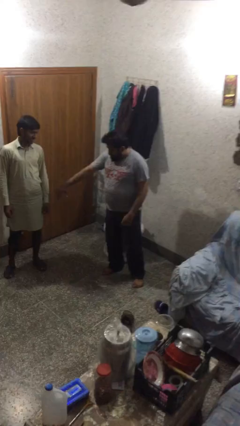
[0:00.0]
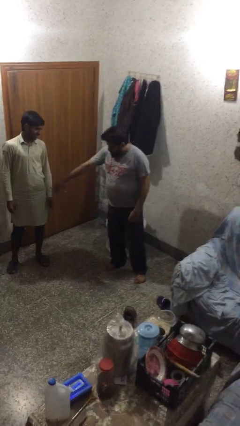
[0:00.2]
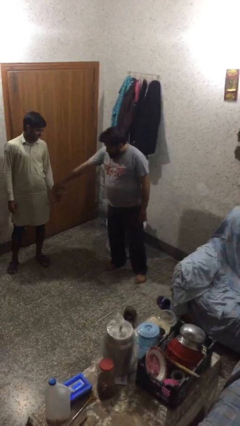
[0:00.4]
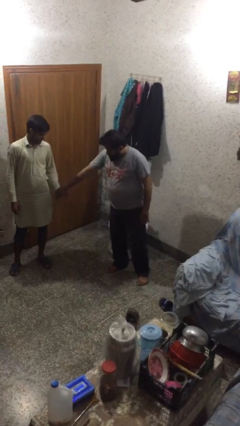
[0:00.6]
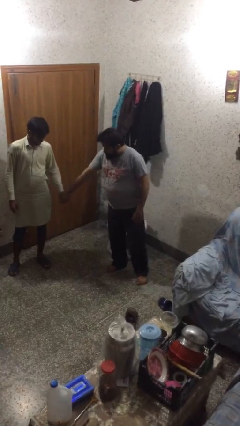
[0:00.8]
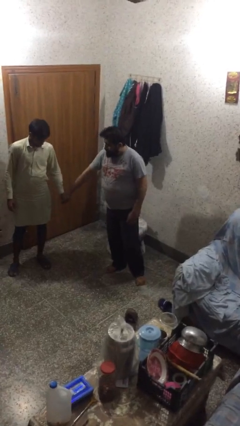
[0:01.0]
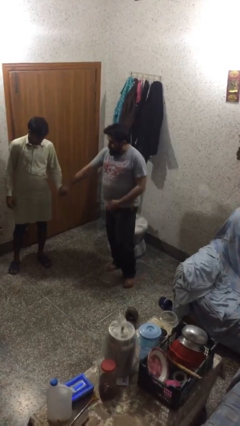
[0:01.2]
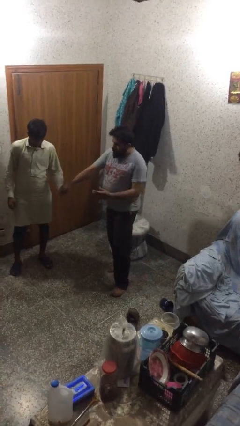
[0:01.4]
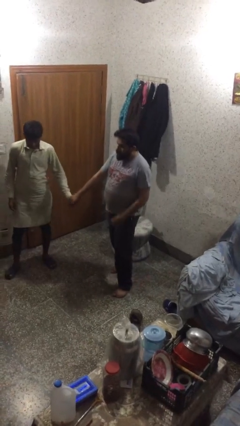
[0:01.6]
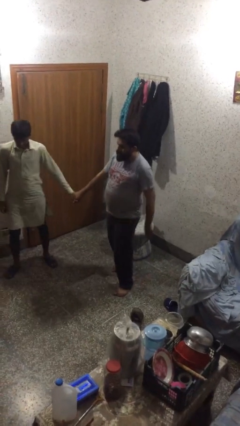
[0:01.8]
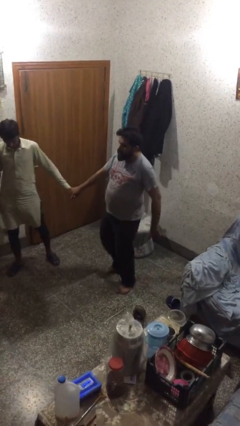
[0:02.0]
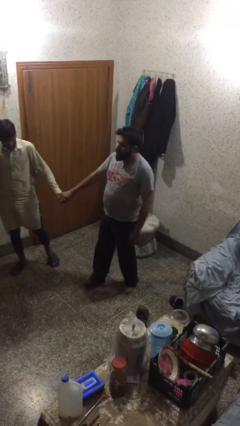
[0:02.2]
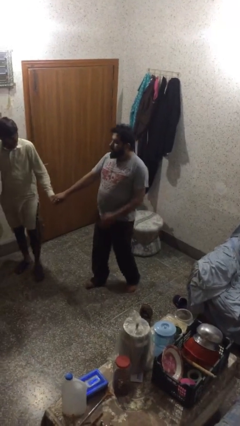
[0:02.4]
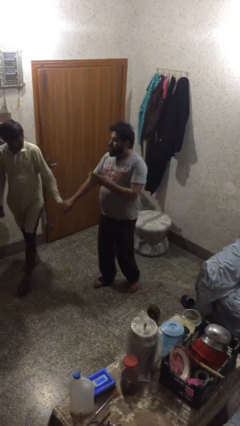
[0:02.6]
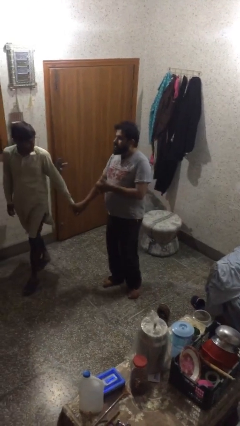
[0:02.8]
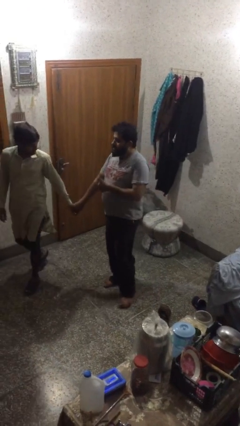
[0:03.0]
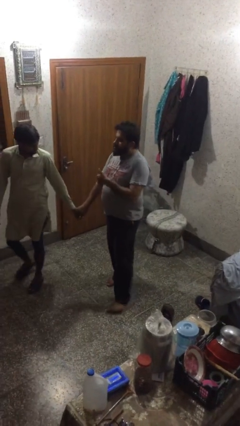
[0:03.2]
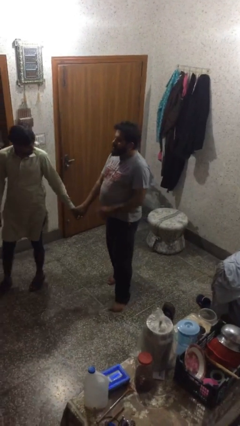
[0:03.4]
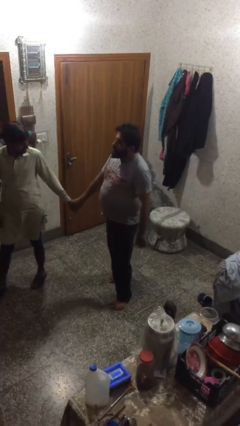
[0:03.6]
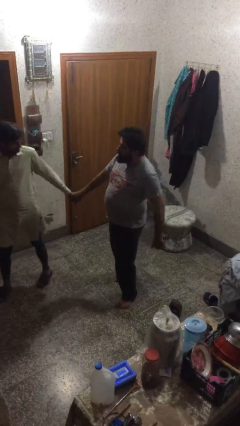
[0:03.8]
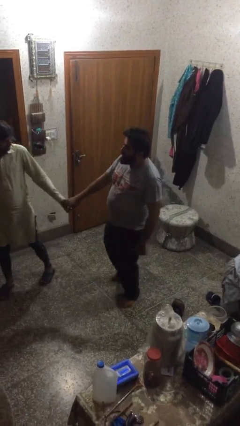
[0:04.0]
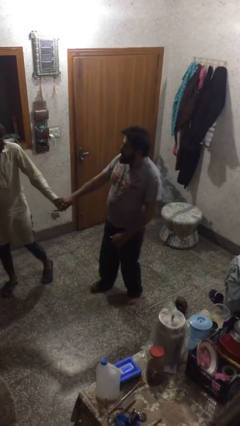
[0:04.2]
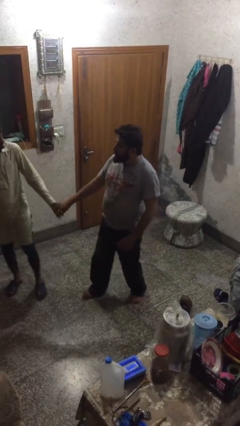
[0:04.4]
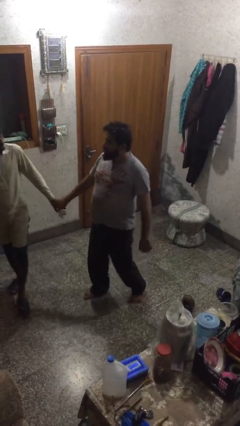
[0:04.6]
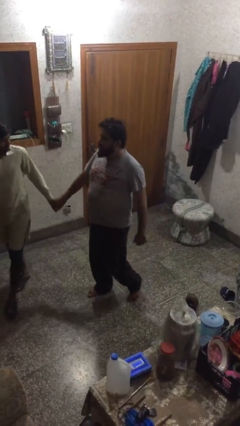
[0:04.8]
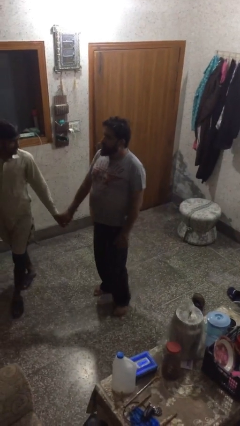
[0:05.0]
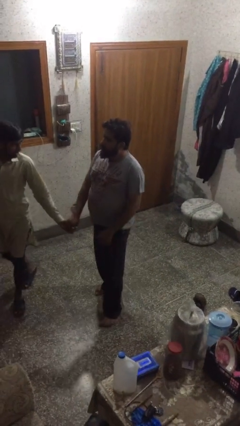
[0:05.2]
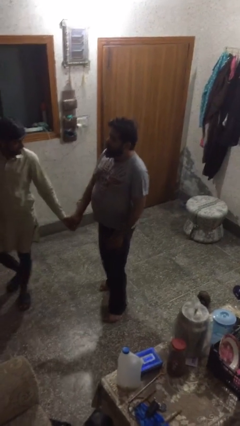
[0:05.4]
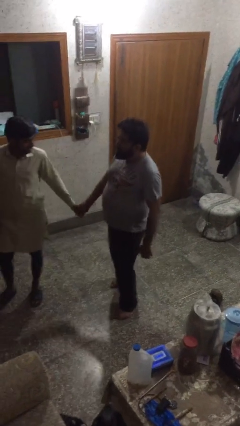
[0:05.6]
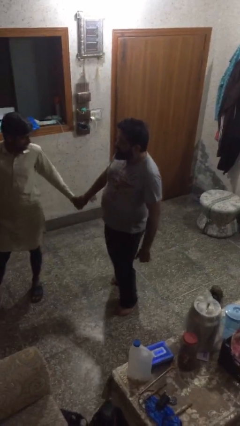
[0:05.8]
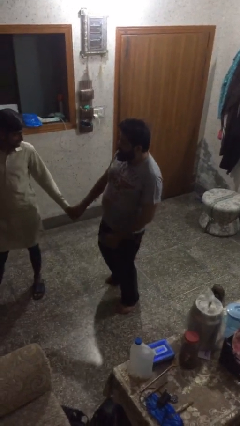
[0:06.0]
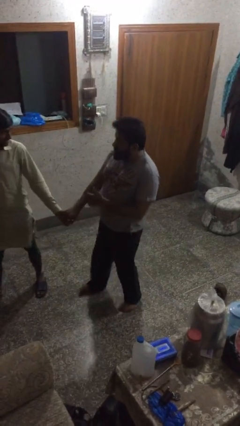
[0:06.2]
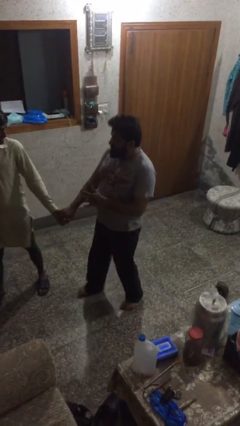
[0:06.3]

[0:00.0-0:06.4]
person holds hand

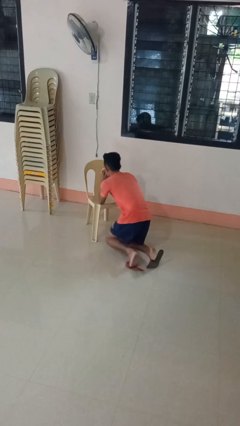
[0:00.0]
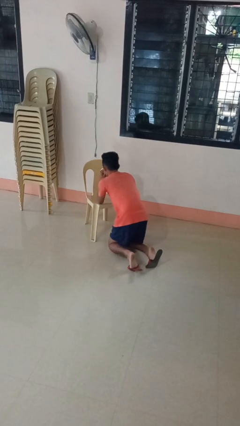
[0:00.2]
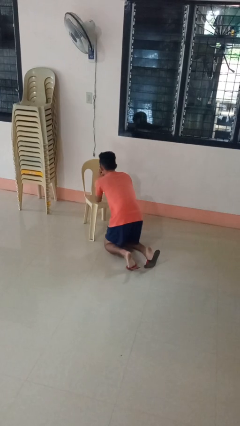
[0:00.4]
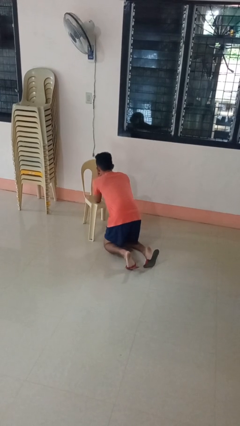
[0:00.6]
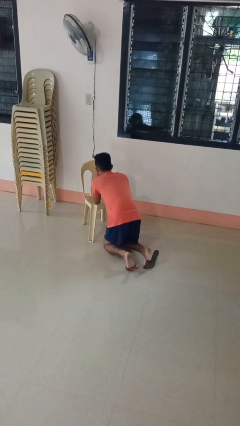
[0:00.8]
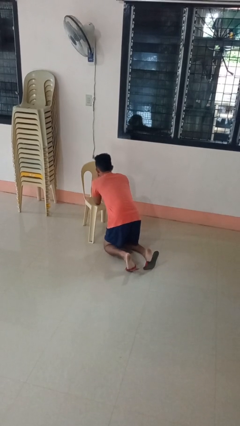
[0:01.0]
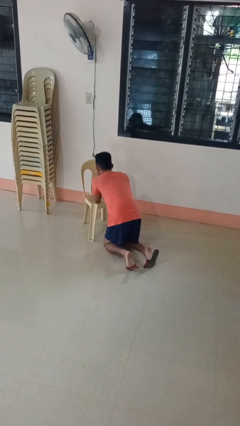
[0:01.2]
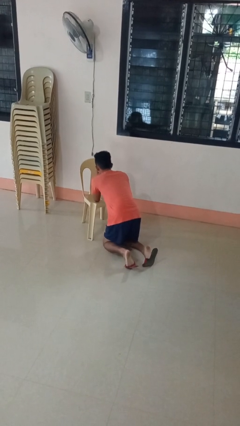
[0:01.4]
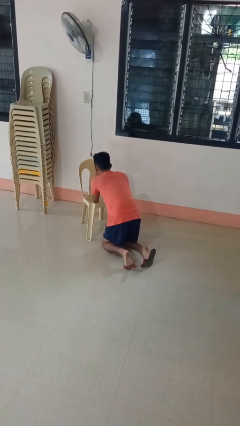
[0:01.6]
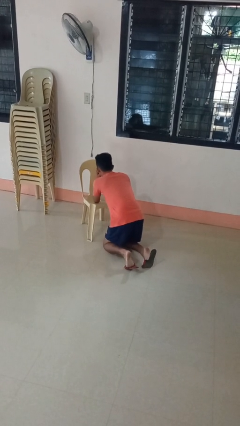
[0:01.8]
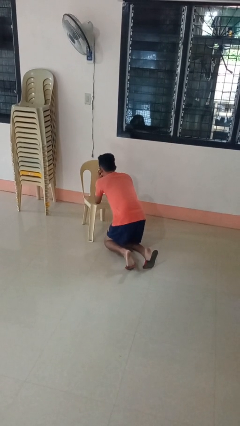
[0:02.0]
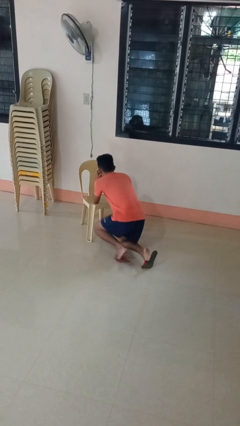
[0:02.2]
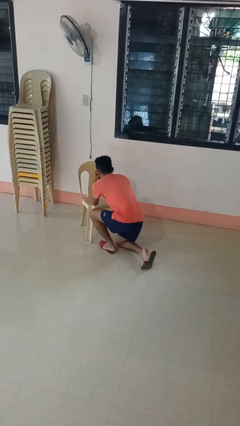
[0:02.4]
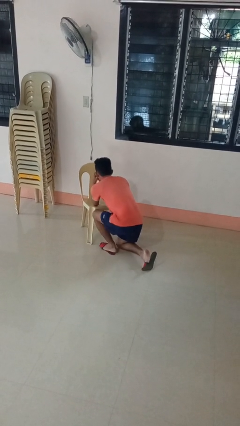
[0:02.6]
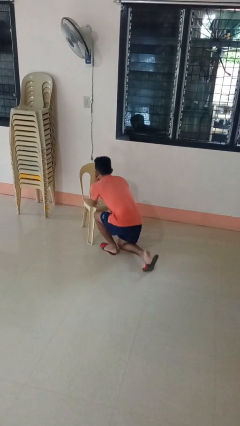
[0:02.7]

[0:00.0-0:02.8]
person prays

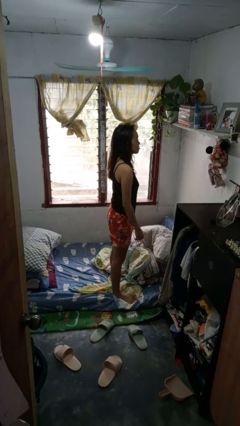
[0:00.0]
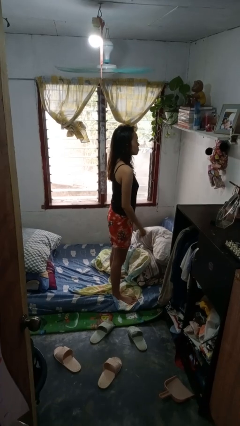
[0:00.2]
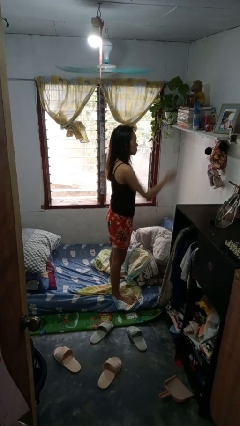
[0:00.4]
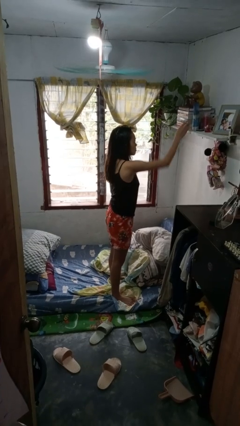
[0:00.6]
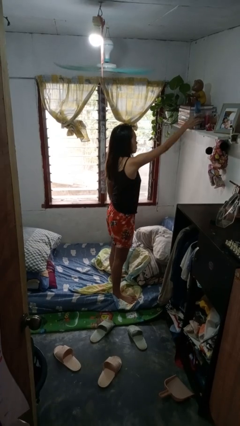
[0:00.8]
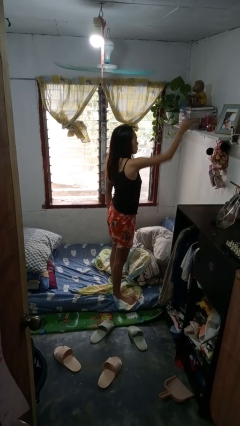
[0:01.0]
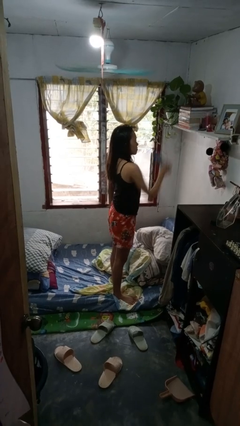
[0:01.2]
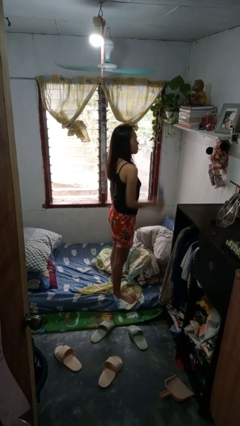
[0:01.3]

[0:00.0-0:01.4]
person picks up object from shelf

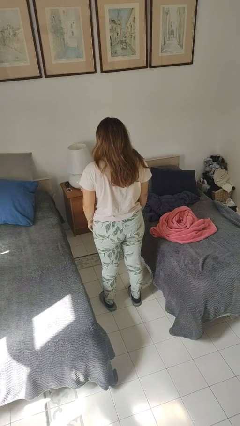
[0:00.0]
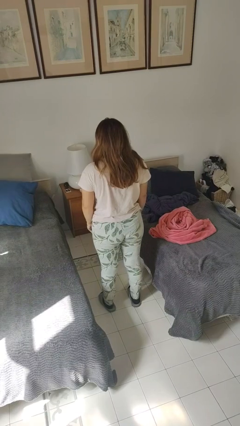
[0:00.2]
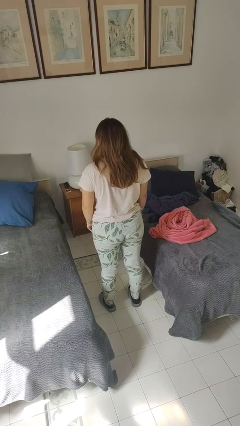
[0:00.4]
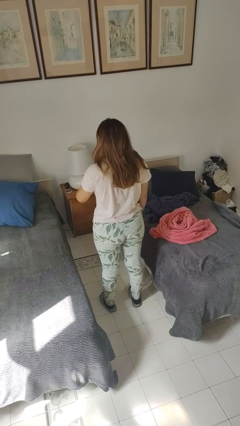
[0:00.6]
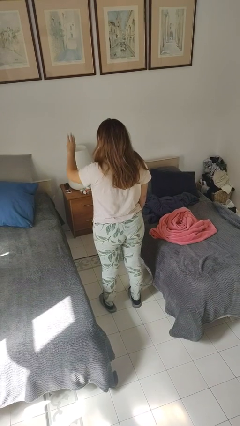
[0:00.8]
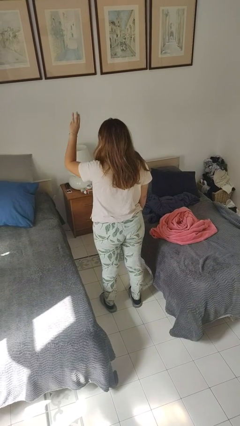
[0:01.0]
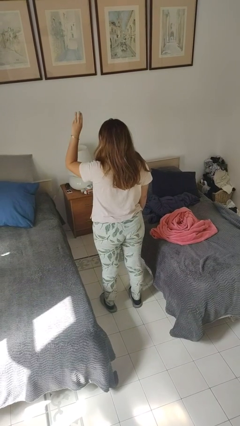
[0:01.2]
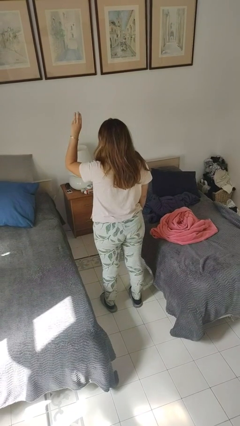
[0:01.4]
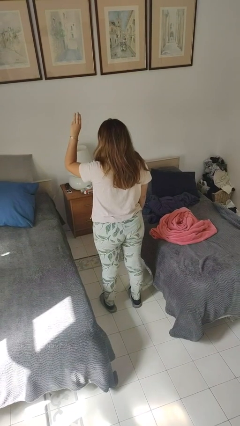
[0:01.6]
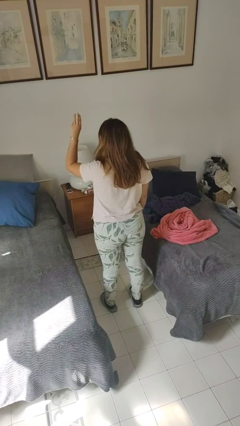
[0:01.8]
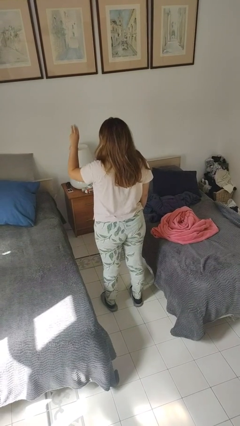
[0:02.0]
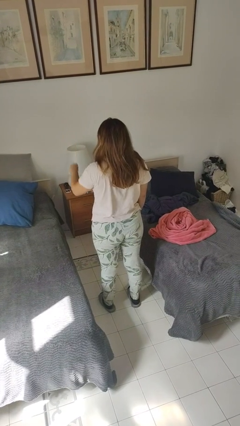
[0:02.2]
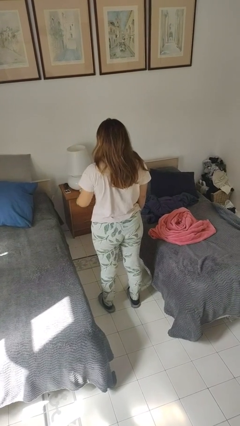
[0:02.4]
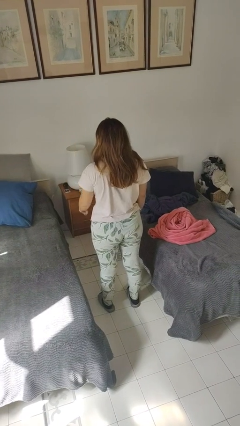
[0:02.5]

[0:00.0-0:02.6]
person gestures number three

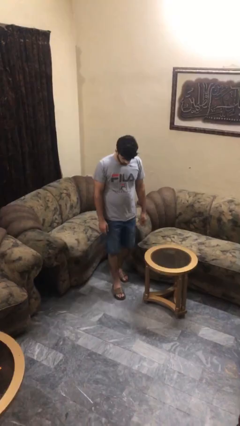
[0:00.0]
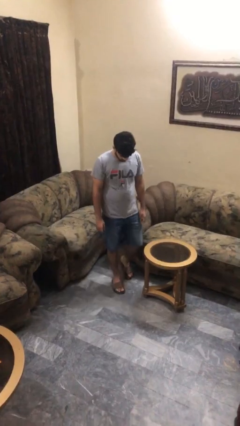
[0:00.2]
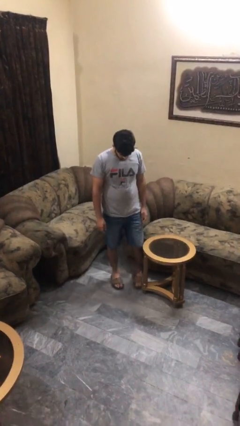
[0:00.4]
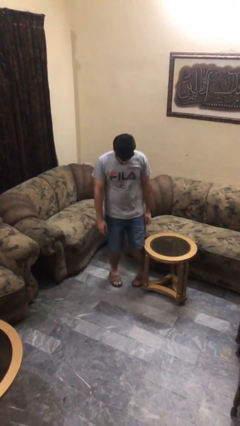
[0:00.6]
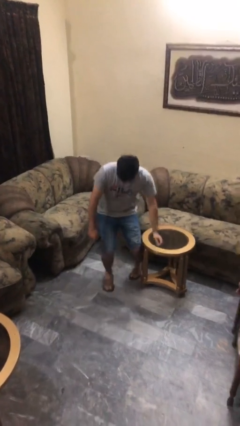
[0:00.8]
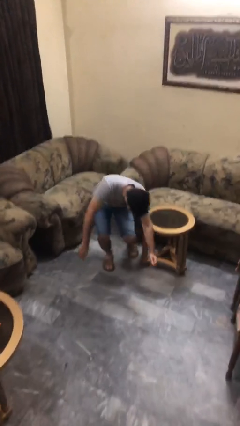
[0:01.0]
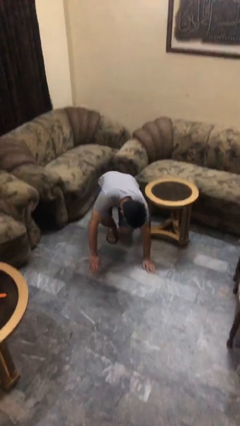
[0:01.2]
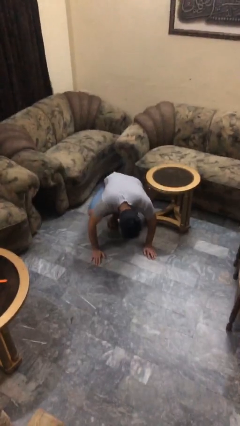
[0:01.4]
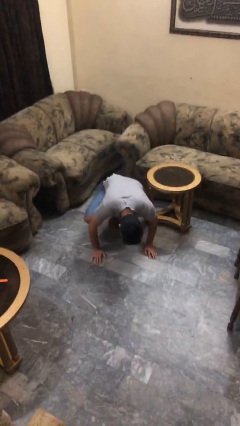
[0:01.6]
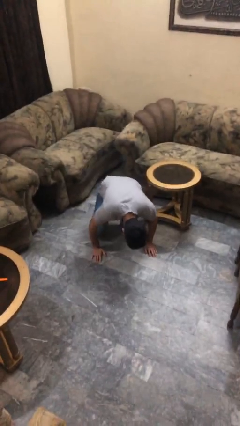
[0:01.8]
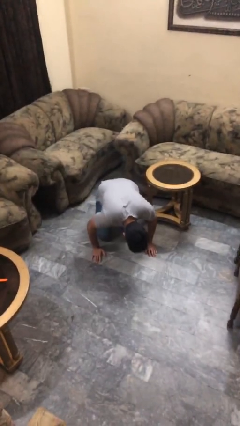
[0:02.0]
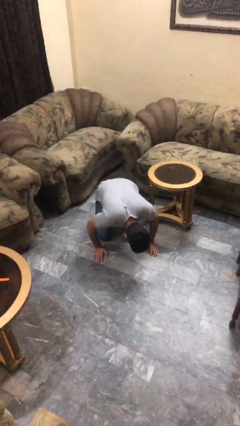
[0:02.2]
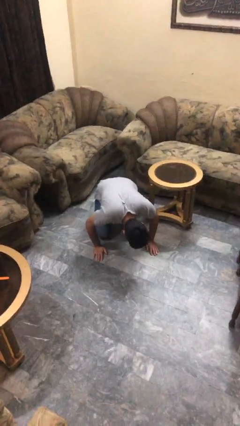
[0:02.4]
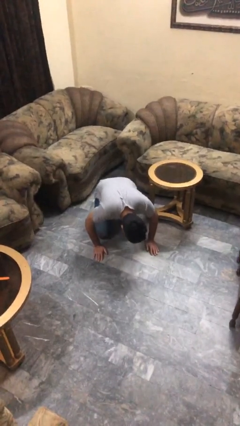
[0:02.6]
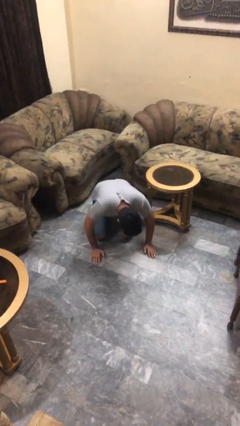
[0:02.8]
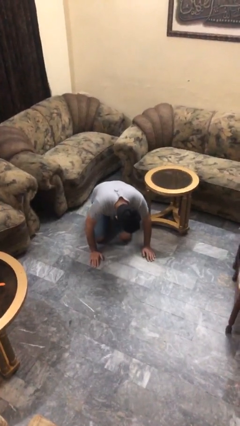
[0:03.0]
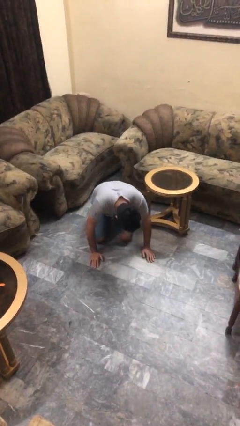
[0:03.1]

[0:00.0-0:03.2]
person trips on object on floor

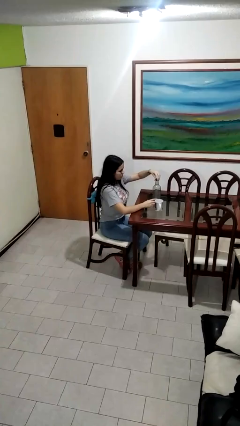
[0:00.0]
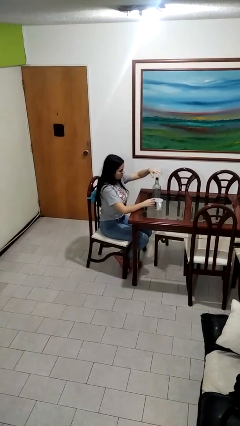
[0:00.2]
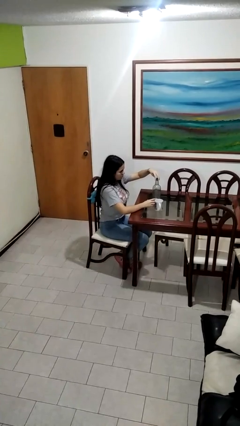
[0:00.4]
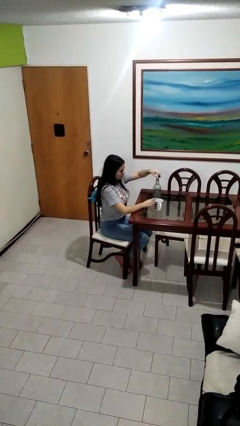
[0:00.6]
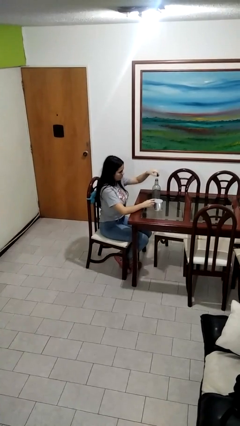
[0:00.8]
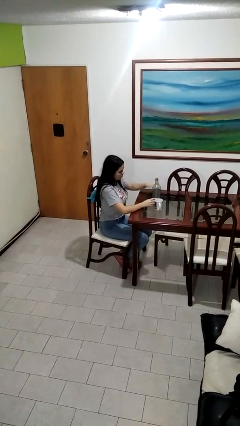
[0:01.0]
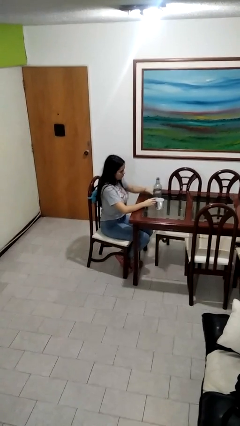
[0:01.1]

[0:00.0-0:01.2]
person unscrews lid from bottle
